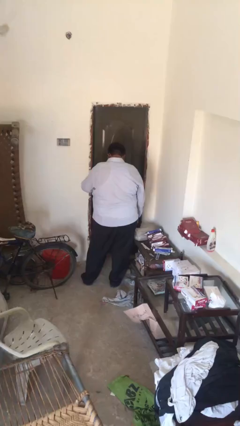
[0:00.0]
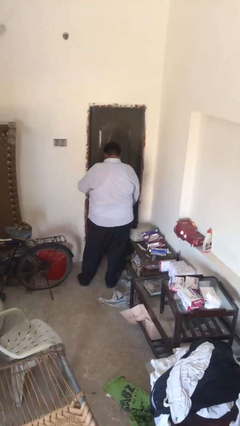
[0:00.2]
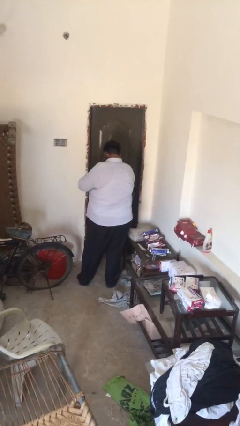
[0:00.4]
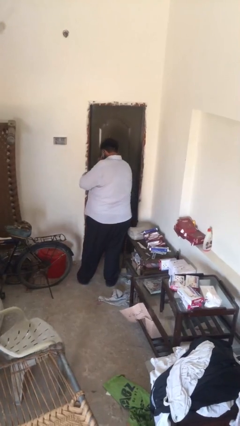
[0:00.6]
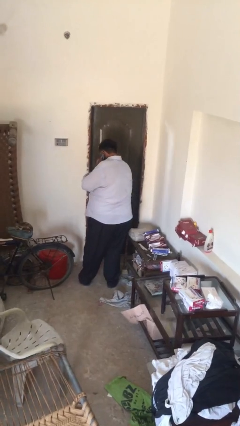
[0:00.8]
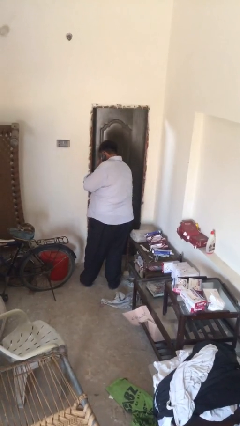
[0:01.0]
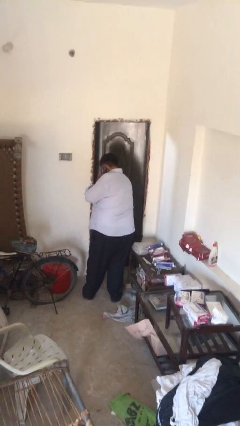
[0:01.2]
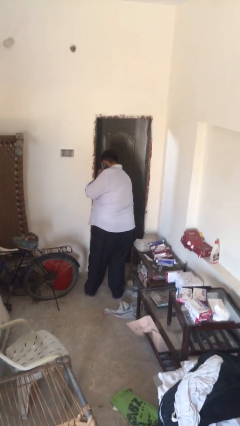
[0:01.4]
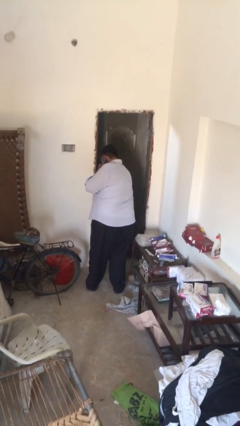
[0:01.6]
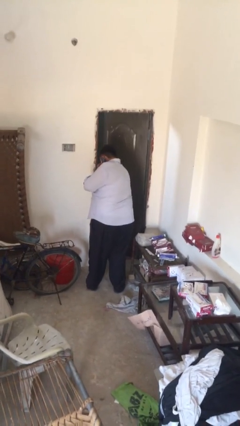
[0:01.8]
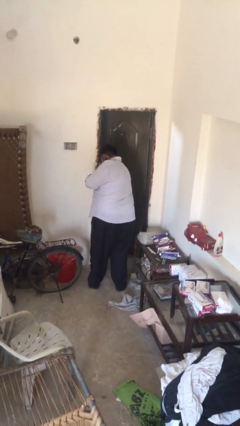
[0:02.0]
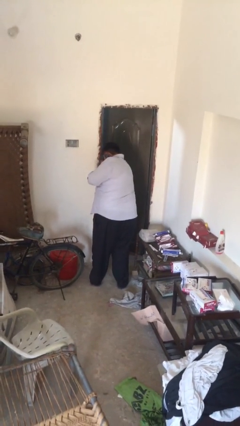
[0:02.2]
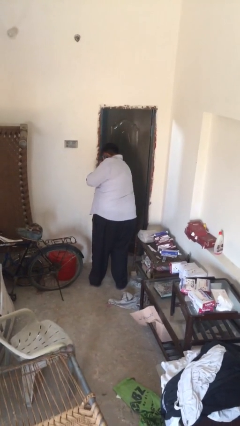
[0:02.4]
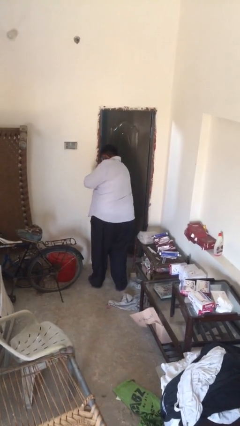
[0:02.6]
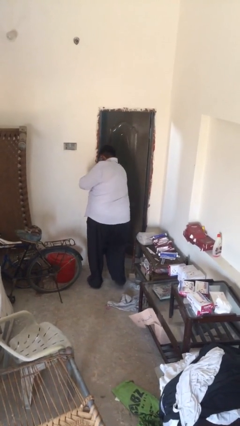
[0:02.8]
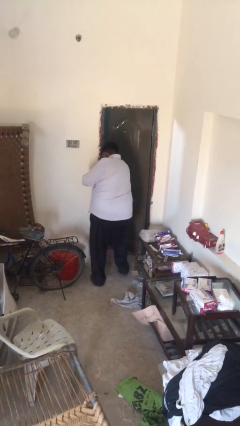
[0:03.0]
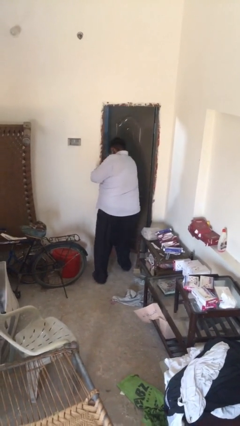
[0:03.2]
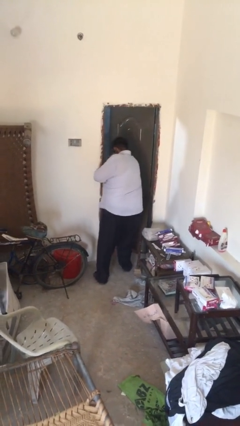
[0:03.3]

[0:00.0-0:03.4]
person opens facility door

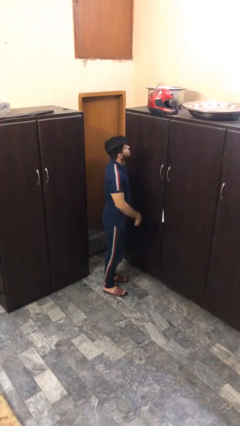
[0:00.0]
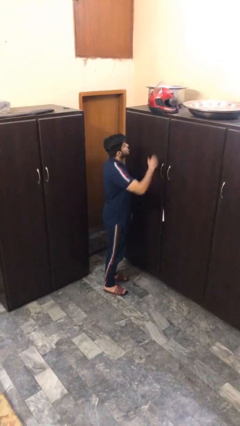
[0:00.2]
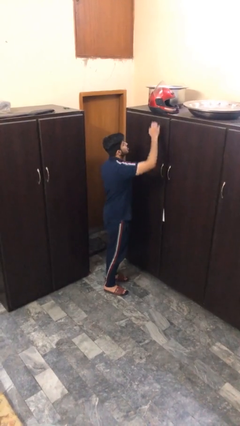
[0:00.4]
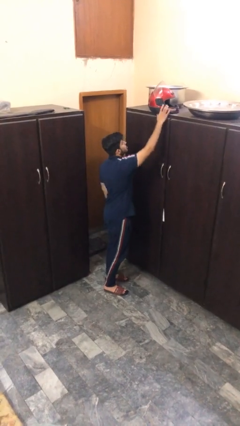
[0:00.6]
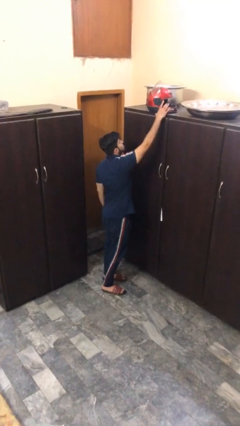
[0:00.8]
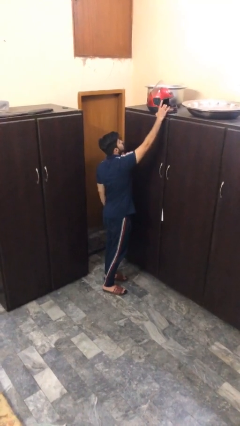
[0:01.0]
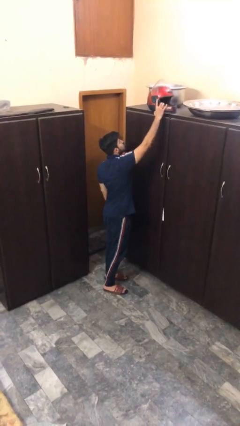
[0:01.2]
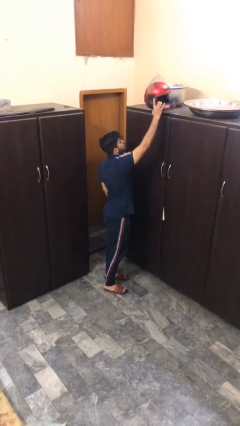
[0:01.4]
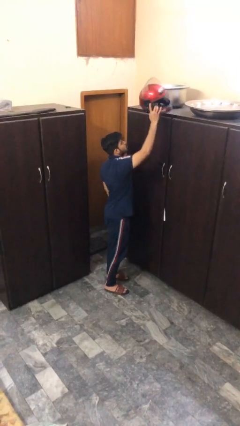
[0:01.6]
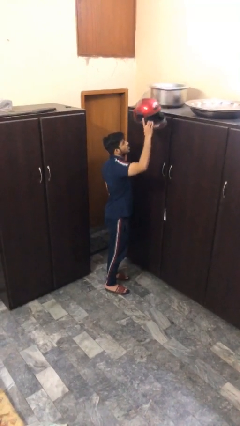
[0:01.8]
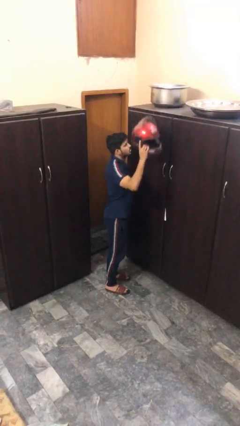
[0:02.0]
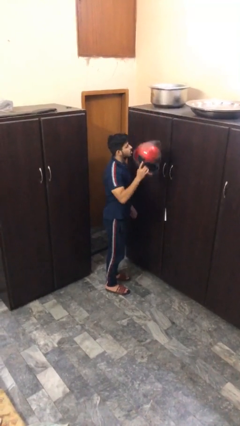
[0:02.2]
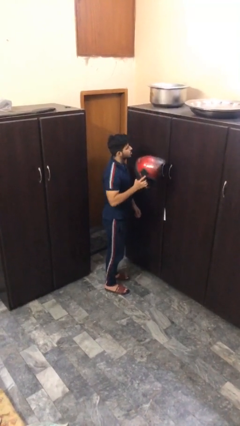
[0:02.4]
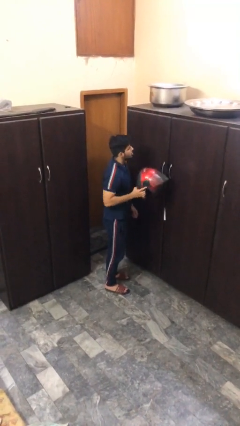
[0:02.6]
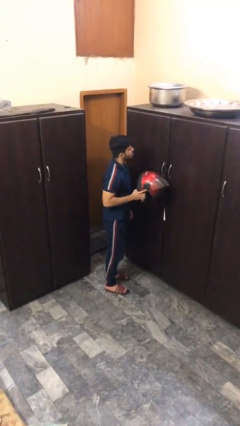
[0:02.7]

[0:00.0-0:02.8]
person picks up object from shelf

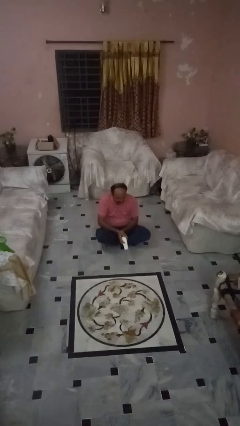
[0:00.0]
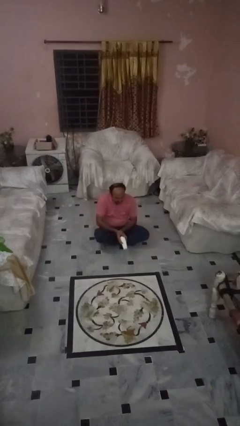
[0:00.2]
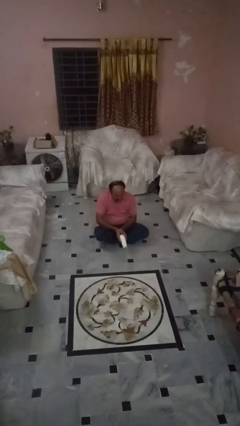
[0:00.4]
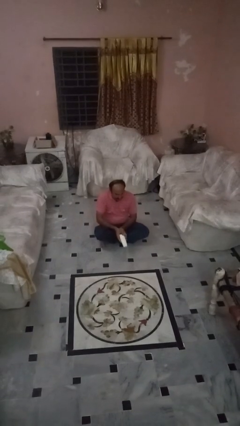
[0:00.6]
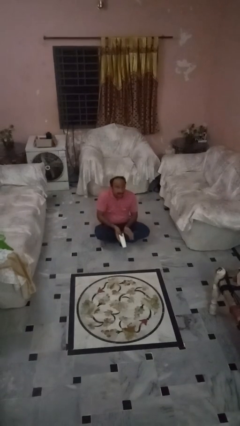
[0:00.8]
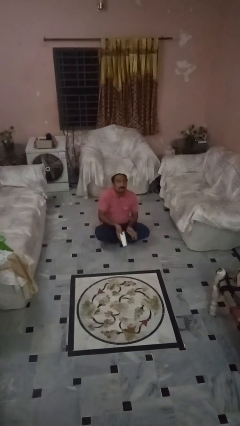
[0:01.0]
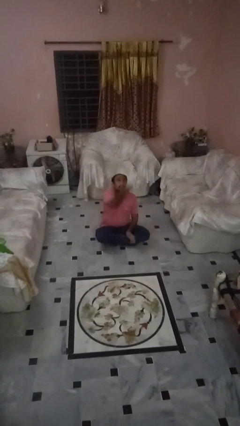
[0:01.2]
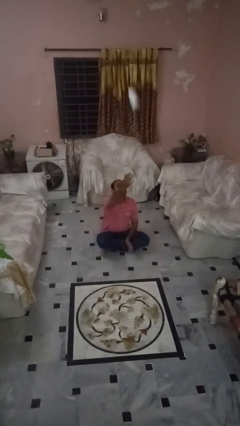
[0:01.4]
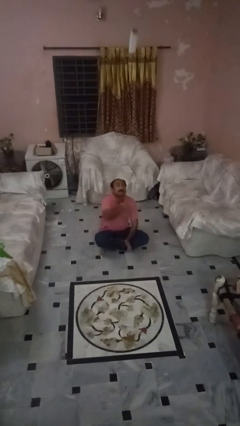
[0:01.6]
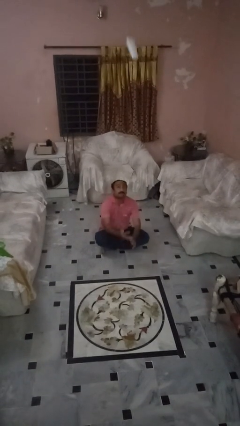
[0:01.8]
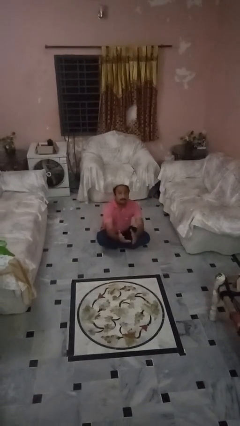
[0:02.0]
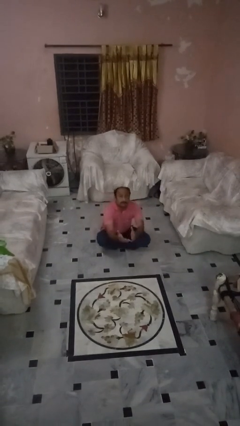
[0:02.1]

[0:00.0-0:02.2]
person drops object

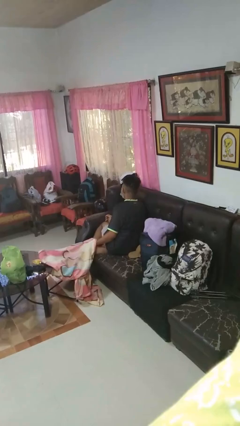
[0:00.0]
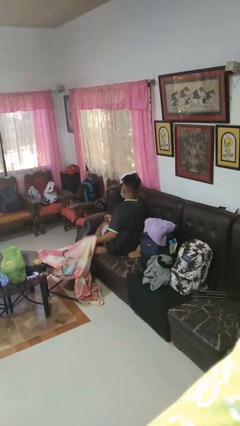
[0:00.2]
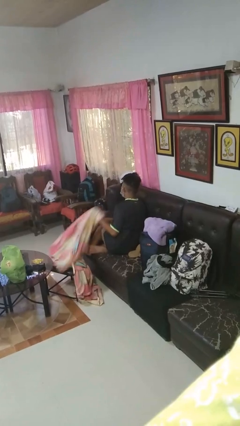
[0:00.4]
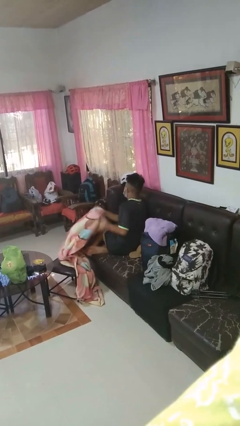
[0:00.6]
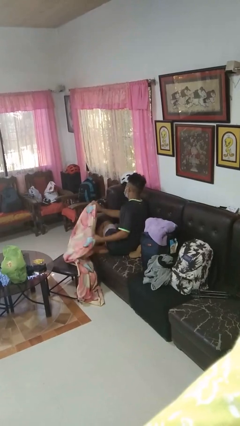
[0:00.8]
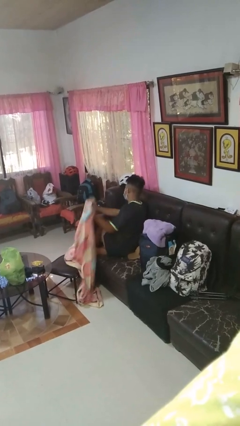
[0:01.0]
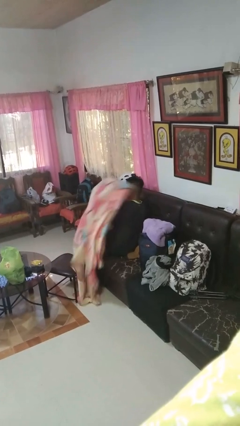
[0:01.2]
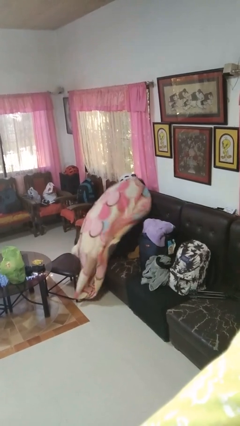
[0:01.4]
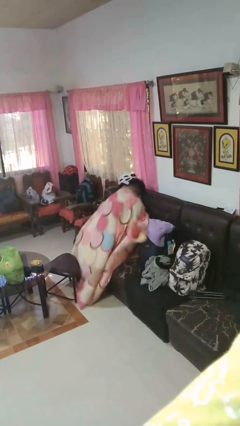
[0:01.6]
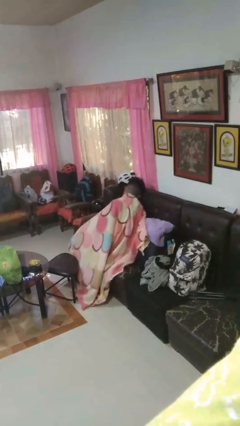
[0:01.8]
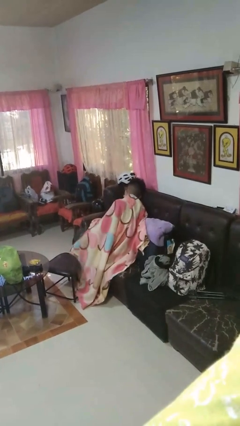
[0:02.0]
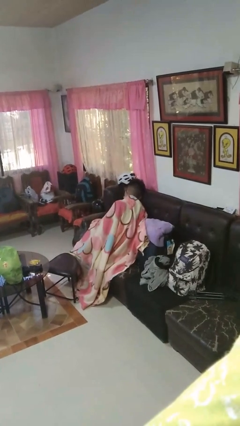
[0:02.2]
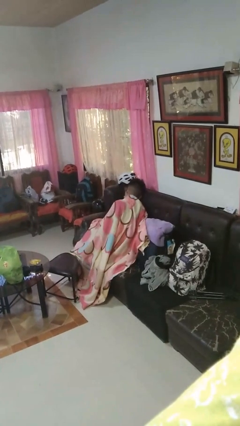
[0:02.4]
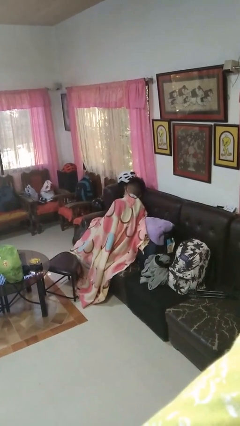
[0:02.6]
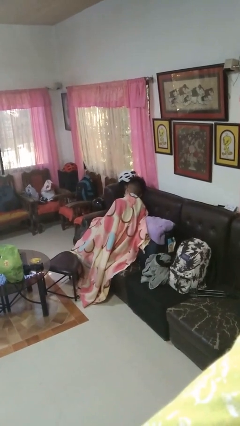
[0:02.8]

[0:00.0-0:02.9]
person covers with blanket

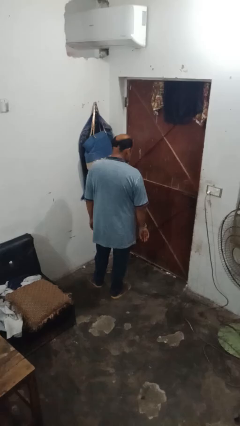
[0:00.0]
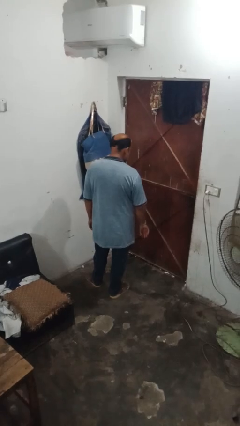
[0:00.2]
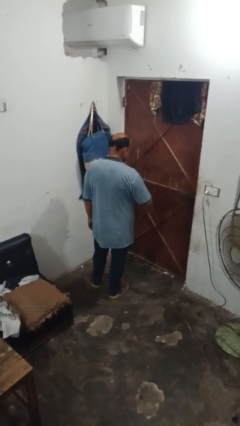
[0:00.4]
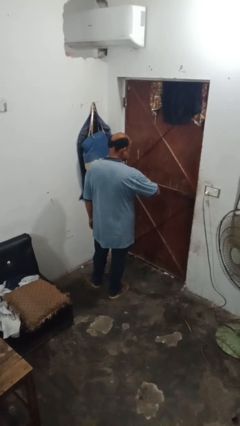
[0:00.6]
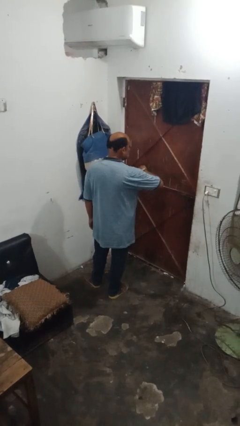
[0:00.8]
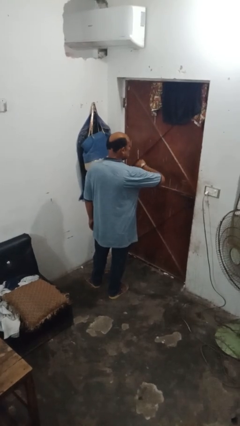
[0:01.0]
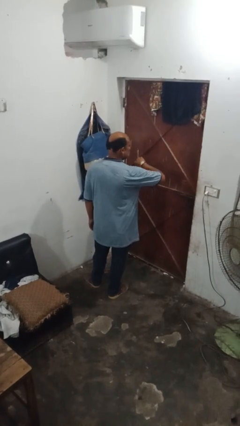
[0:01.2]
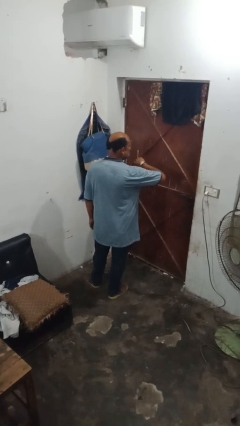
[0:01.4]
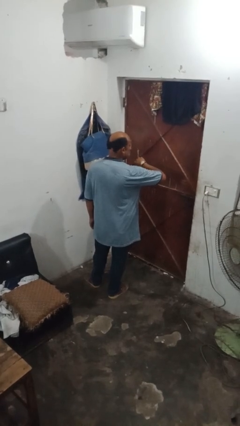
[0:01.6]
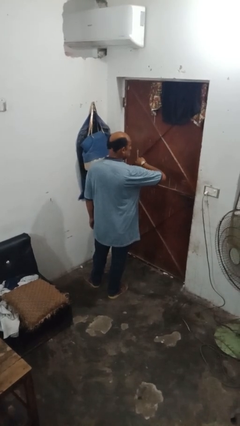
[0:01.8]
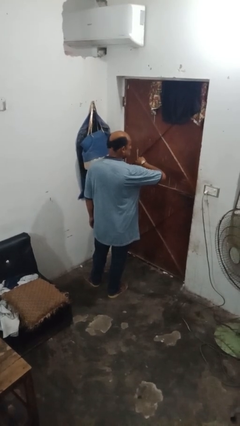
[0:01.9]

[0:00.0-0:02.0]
person looks at wristwatch

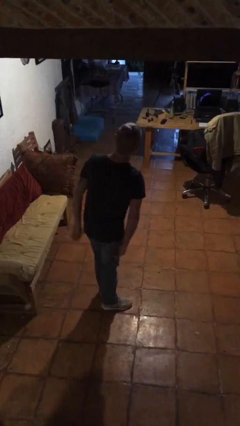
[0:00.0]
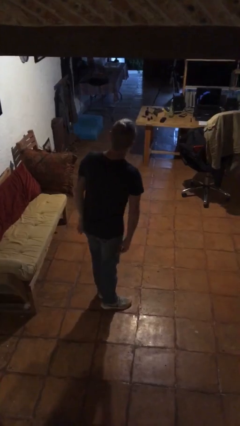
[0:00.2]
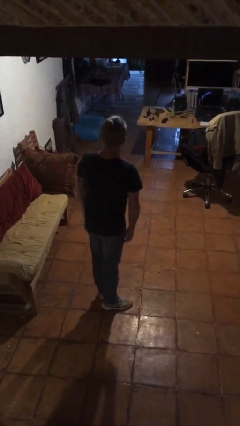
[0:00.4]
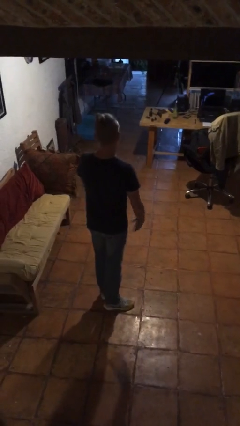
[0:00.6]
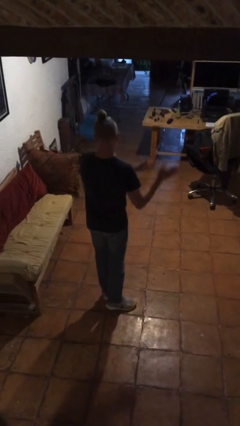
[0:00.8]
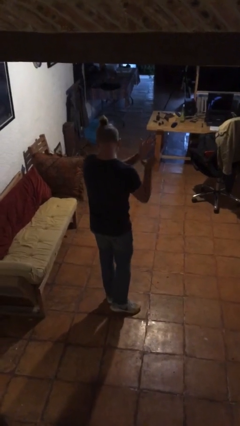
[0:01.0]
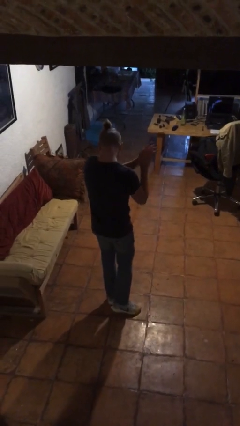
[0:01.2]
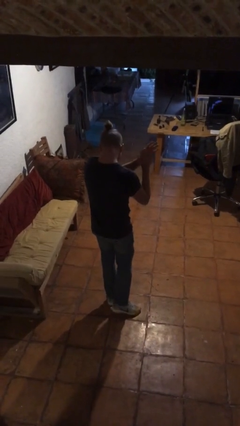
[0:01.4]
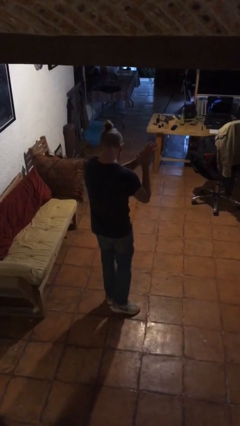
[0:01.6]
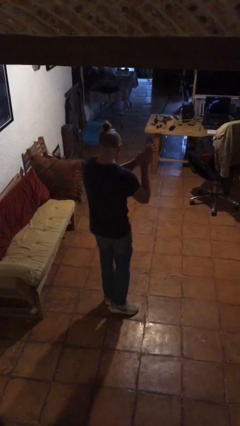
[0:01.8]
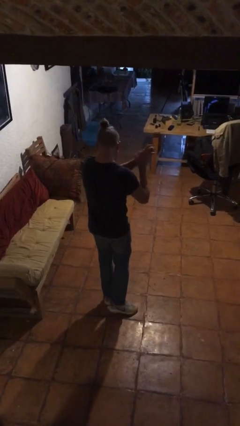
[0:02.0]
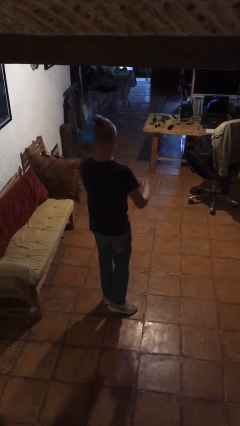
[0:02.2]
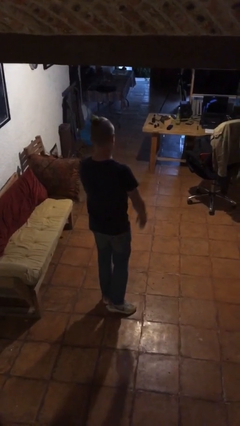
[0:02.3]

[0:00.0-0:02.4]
person claps hands

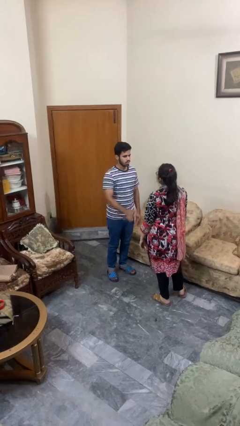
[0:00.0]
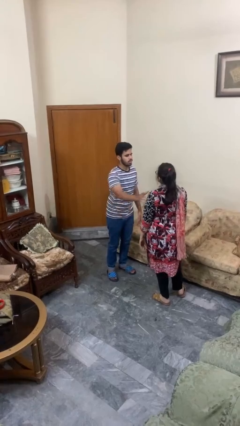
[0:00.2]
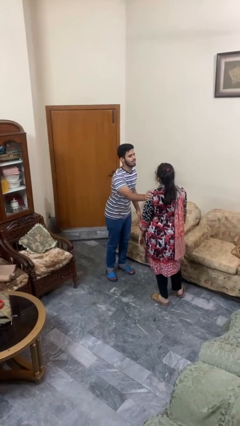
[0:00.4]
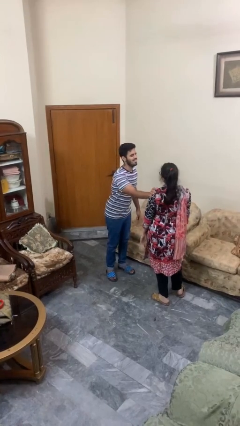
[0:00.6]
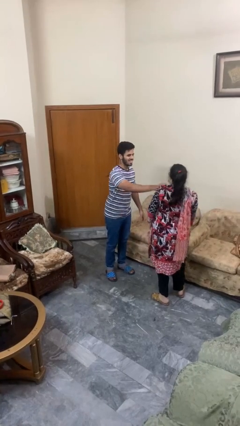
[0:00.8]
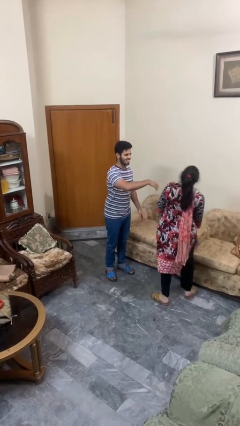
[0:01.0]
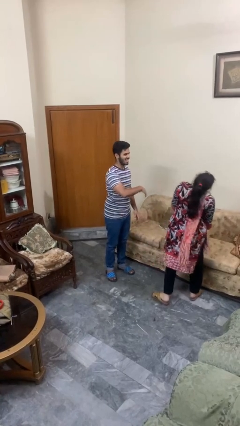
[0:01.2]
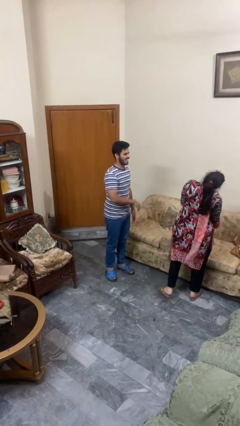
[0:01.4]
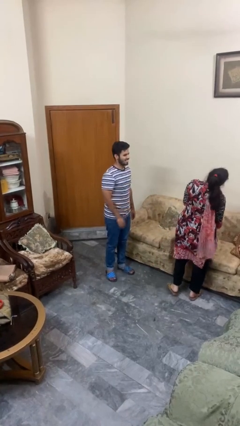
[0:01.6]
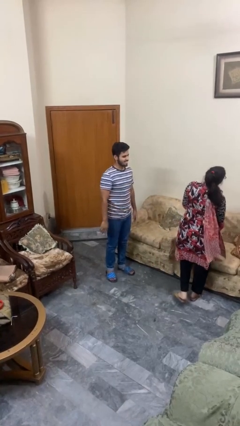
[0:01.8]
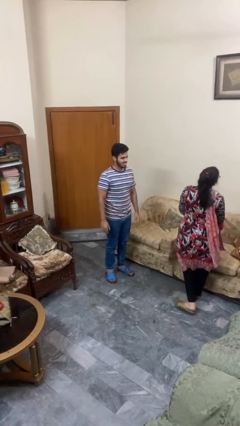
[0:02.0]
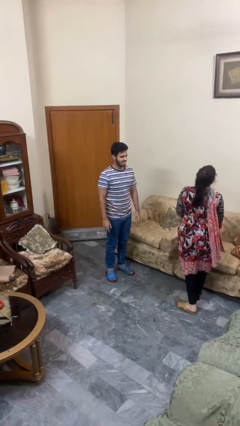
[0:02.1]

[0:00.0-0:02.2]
person shoves person
